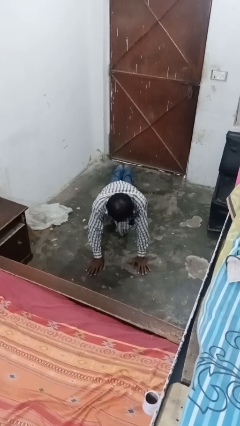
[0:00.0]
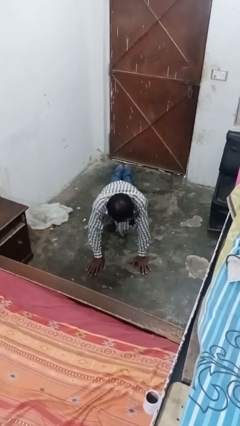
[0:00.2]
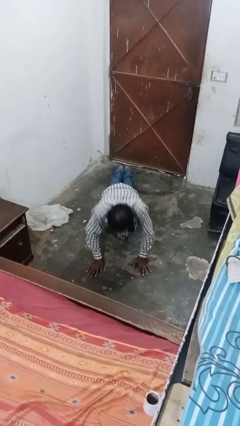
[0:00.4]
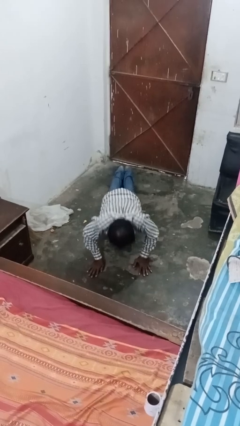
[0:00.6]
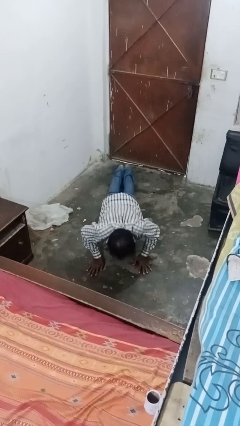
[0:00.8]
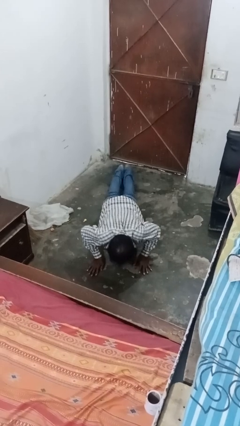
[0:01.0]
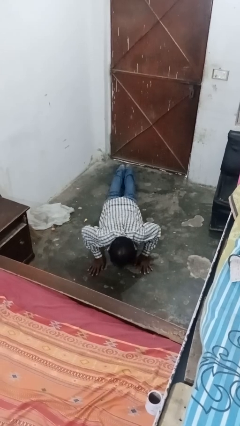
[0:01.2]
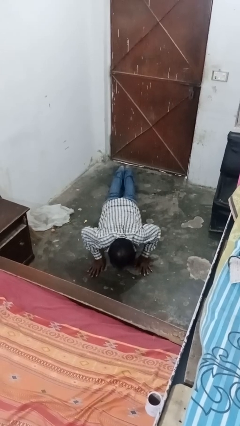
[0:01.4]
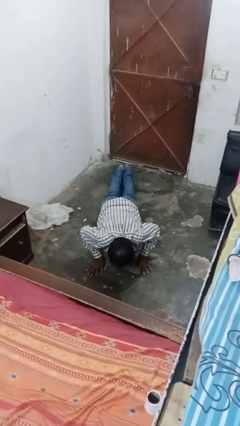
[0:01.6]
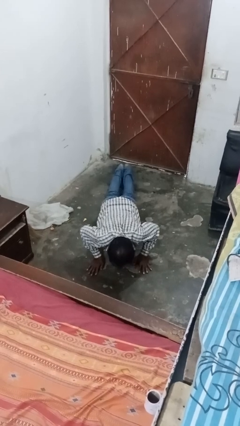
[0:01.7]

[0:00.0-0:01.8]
person exercises with pushup

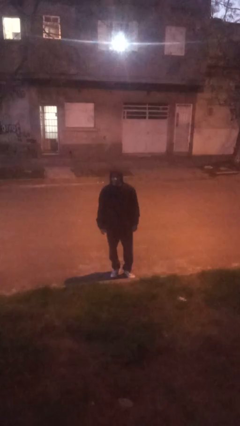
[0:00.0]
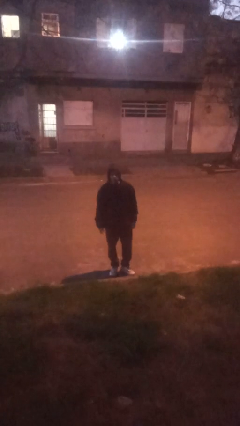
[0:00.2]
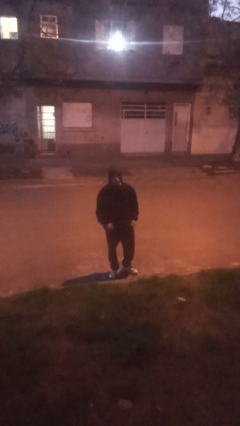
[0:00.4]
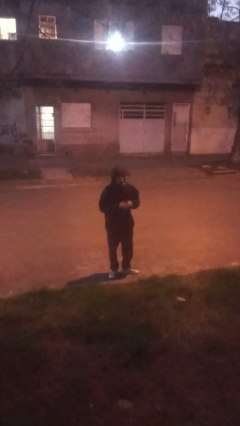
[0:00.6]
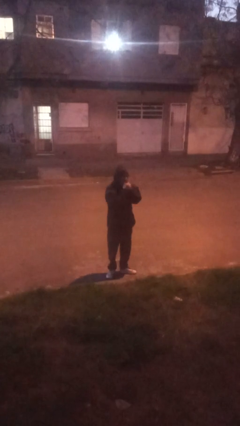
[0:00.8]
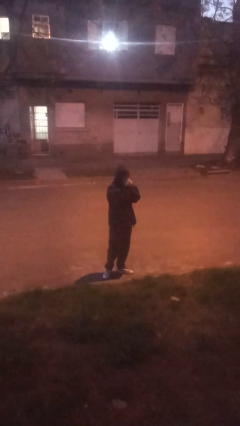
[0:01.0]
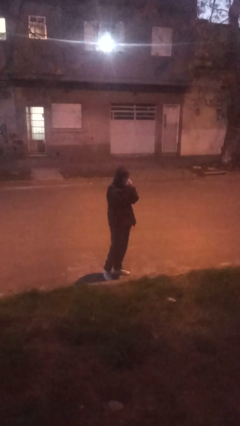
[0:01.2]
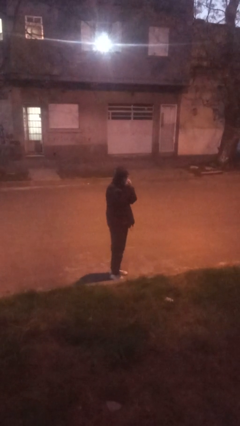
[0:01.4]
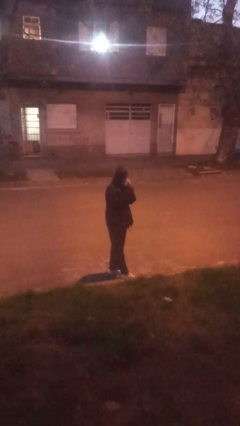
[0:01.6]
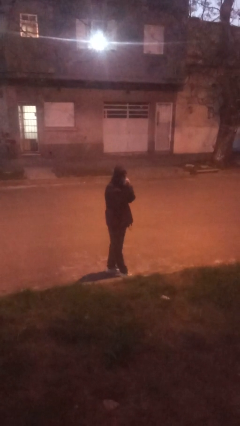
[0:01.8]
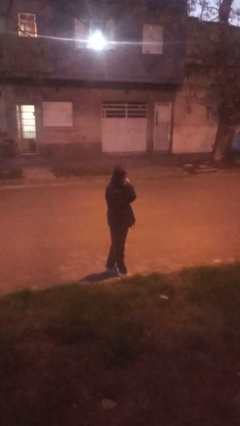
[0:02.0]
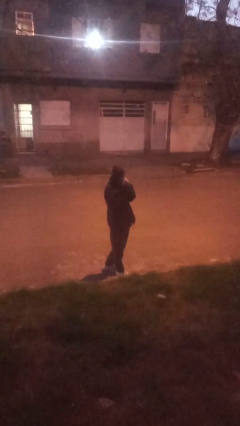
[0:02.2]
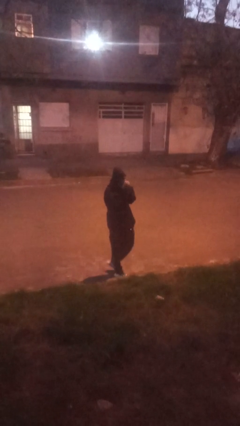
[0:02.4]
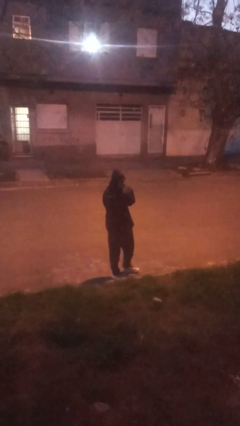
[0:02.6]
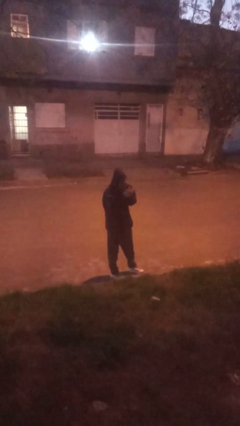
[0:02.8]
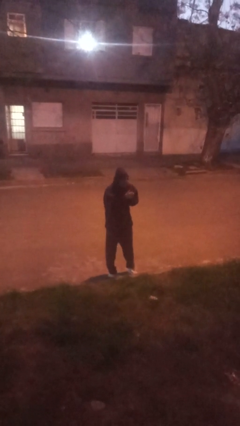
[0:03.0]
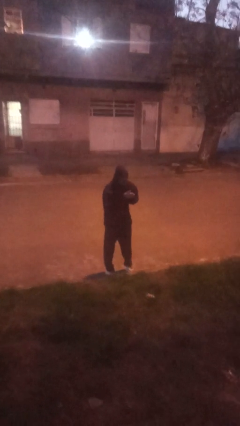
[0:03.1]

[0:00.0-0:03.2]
person blows into hands

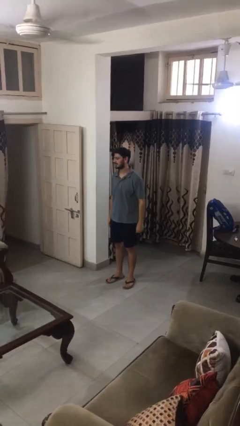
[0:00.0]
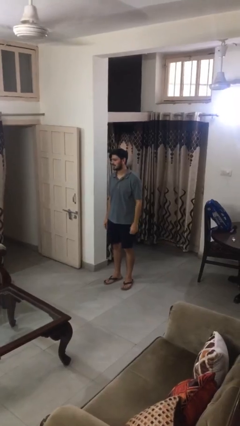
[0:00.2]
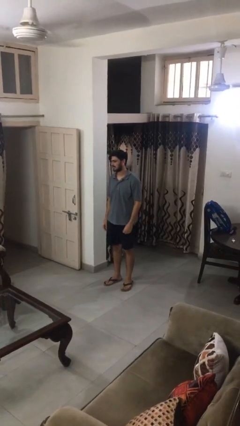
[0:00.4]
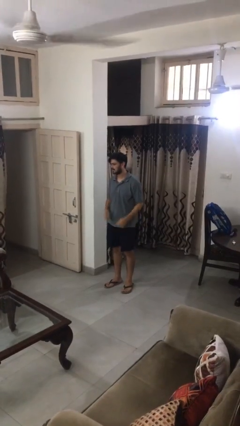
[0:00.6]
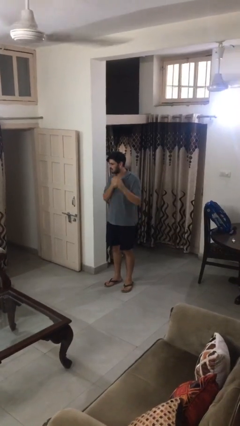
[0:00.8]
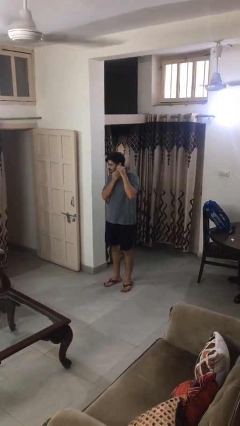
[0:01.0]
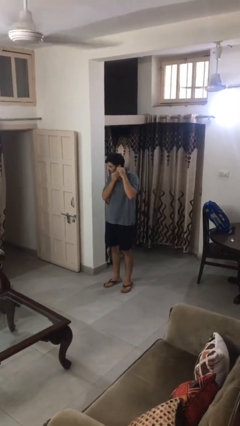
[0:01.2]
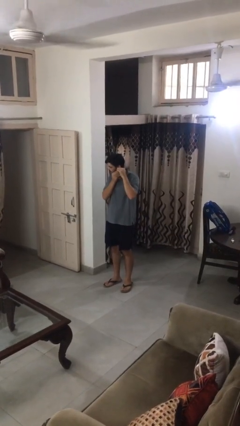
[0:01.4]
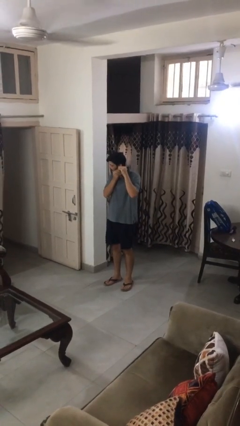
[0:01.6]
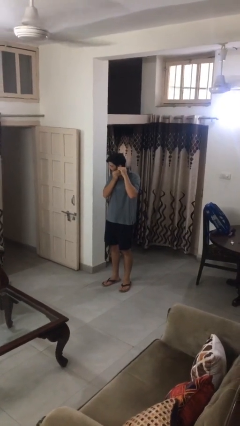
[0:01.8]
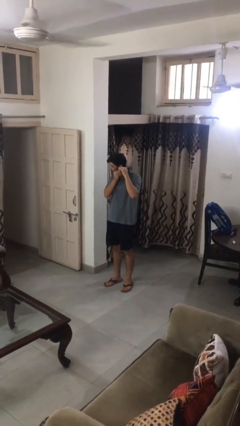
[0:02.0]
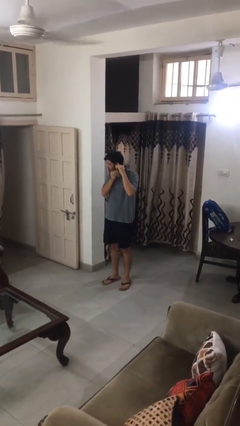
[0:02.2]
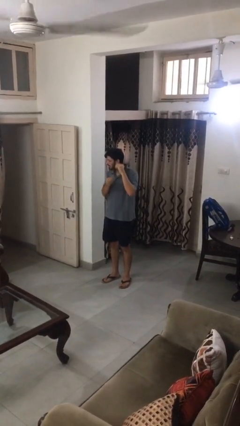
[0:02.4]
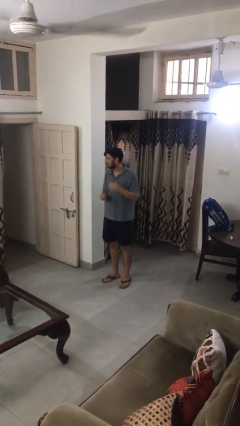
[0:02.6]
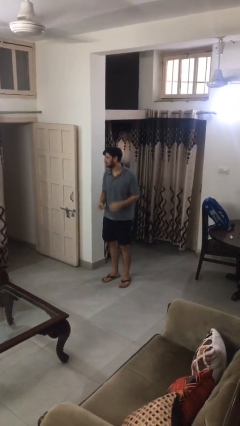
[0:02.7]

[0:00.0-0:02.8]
person takes off earrings

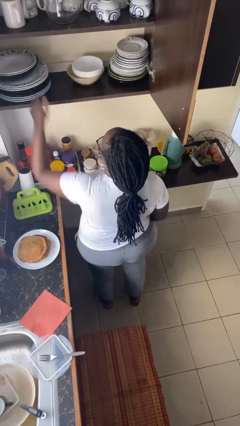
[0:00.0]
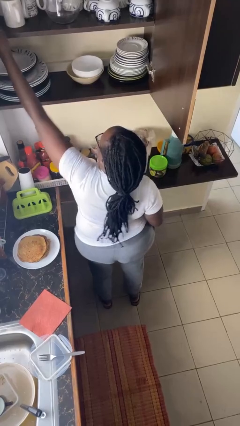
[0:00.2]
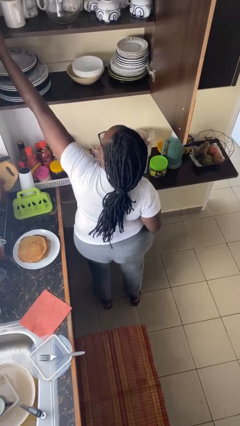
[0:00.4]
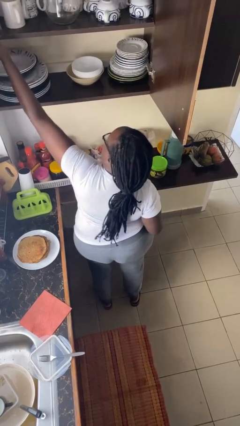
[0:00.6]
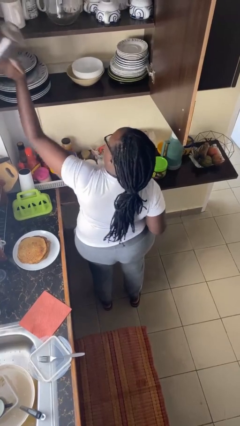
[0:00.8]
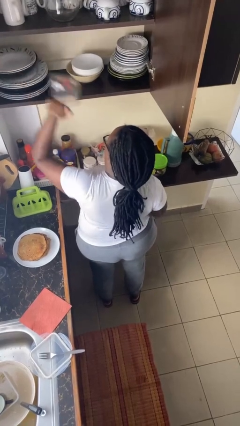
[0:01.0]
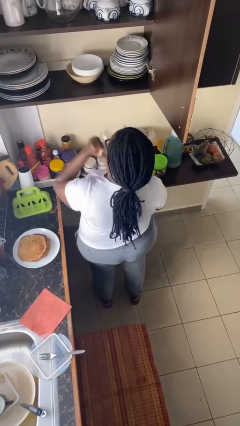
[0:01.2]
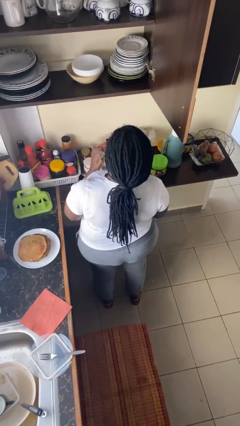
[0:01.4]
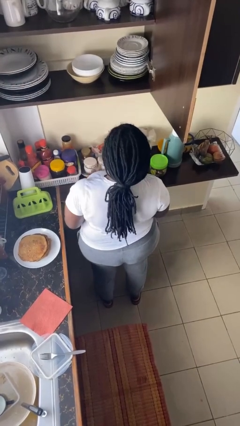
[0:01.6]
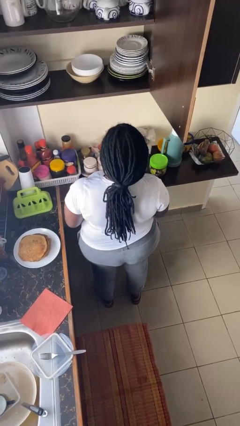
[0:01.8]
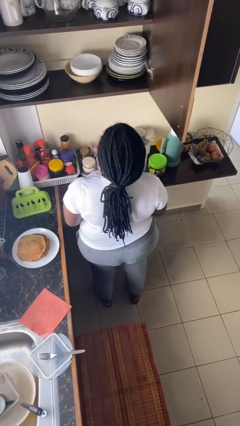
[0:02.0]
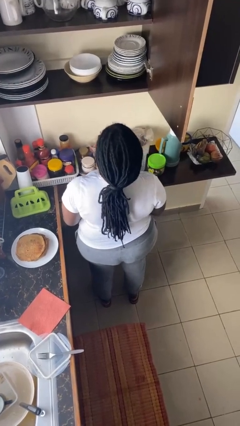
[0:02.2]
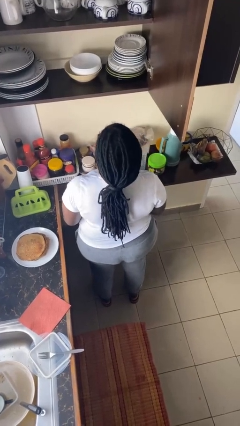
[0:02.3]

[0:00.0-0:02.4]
person takes object from cabinet

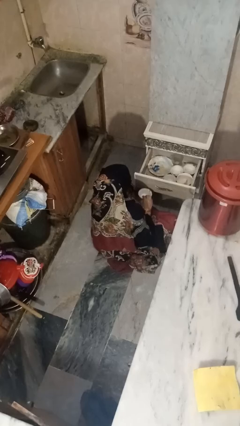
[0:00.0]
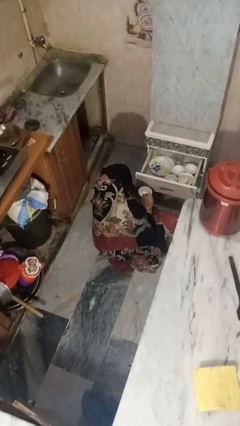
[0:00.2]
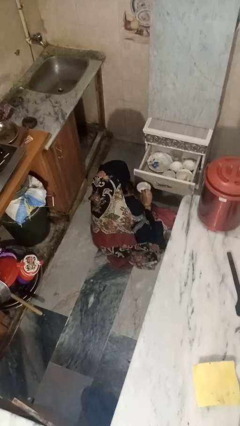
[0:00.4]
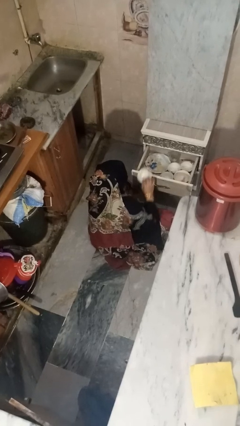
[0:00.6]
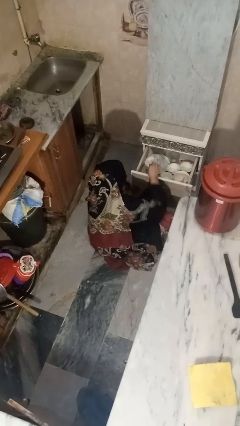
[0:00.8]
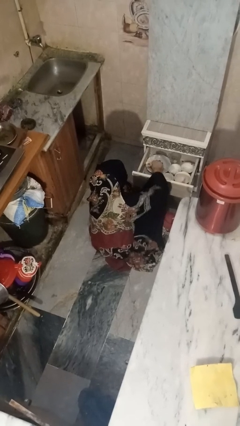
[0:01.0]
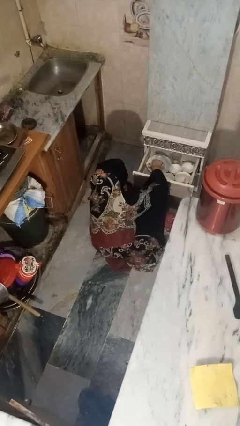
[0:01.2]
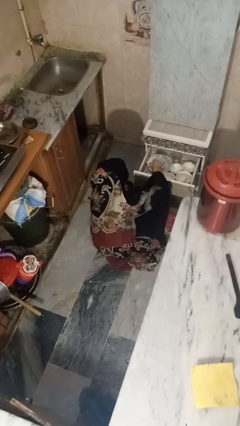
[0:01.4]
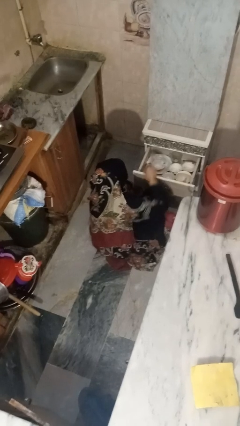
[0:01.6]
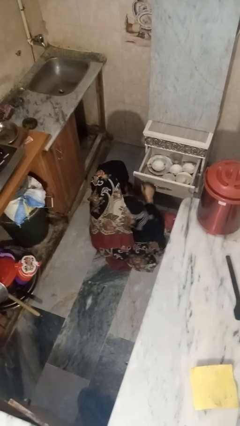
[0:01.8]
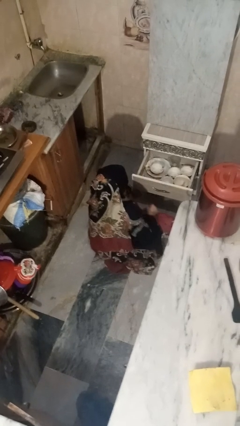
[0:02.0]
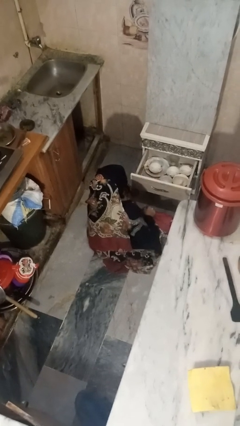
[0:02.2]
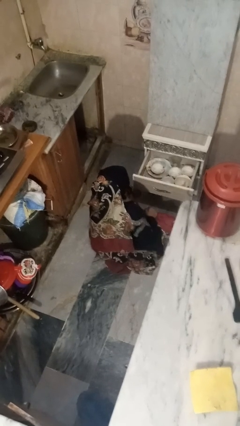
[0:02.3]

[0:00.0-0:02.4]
person puts object into kitchen drawer

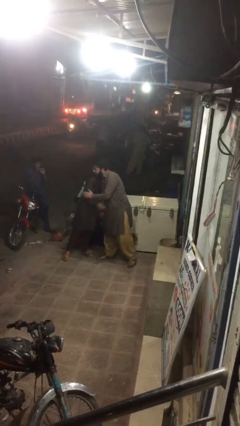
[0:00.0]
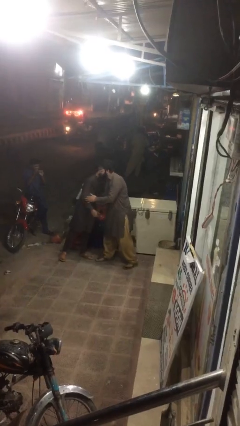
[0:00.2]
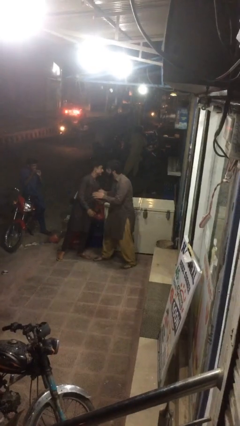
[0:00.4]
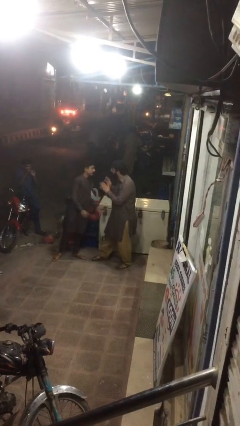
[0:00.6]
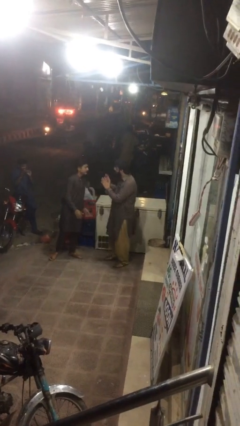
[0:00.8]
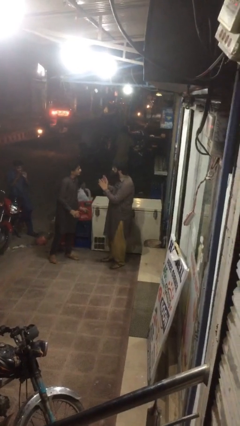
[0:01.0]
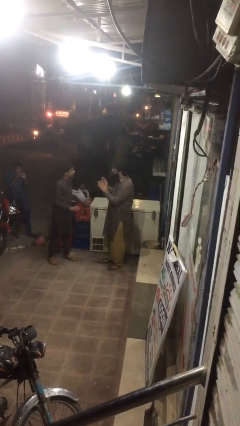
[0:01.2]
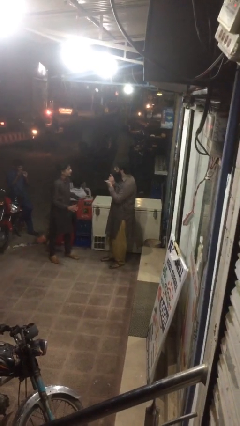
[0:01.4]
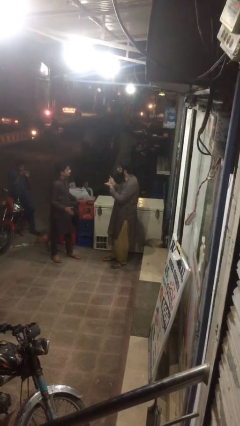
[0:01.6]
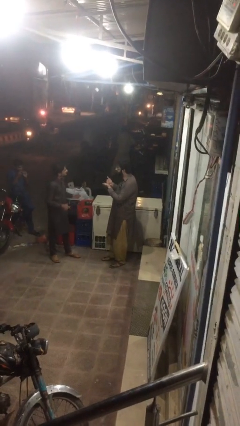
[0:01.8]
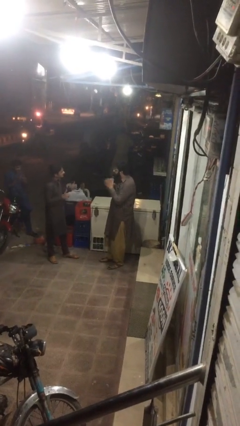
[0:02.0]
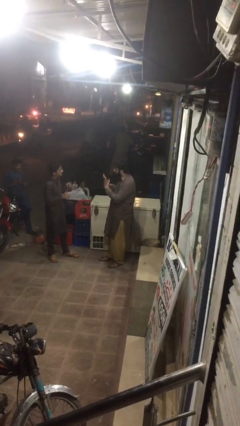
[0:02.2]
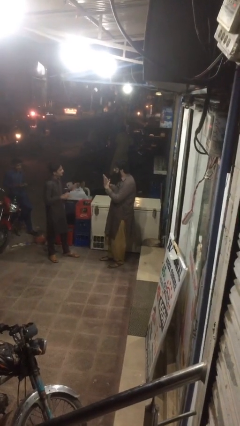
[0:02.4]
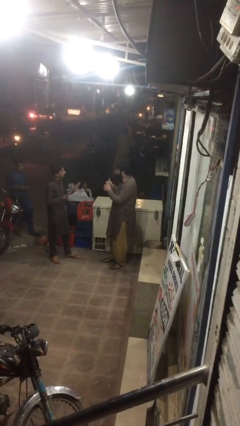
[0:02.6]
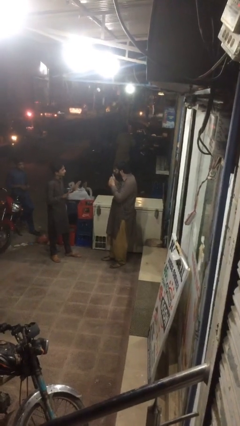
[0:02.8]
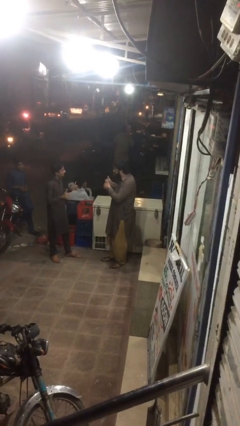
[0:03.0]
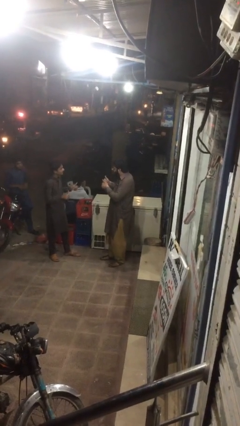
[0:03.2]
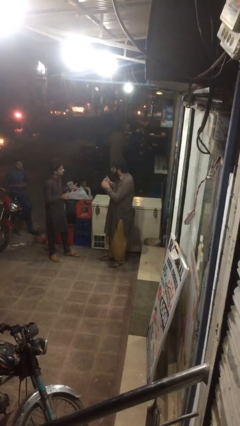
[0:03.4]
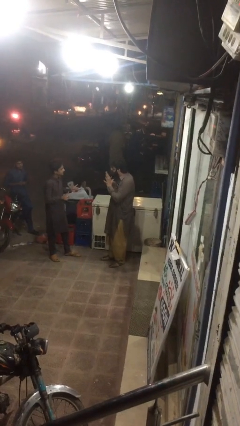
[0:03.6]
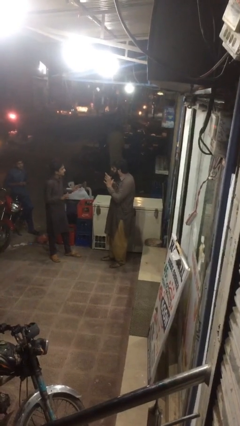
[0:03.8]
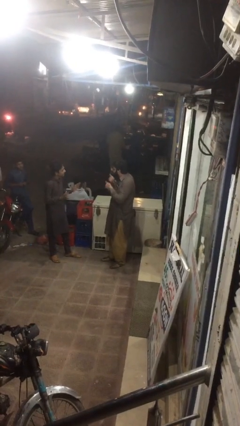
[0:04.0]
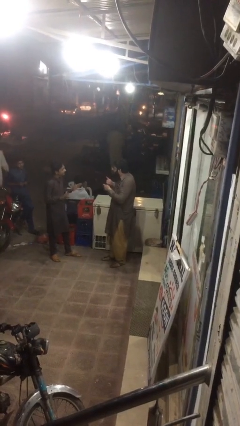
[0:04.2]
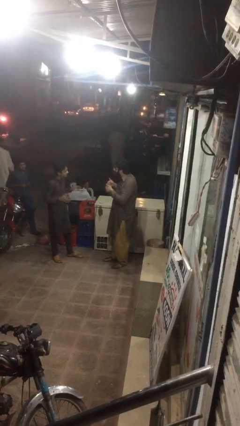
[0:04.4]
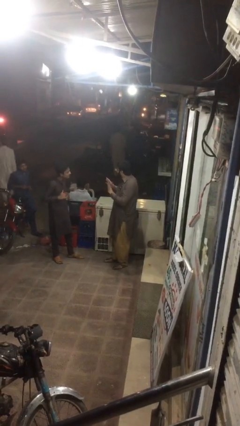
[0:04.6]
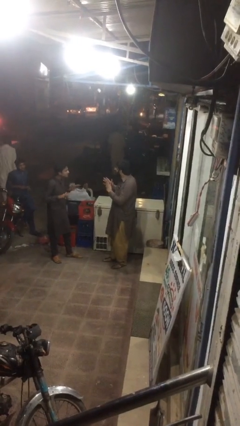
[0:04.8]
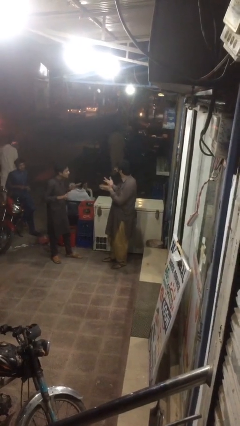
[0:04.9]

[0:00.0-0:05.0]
person talks to person
